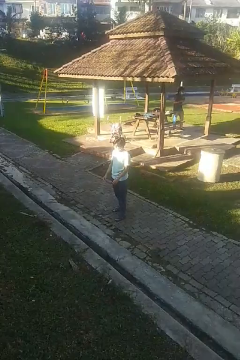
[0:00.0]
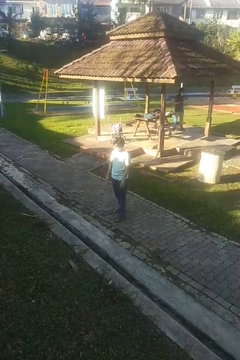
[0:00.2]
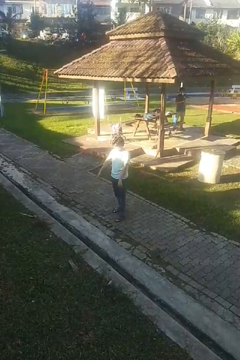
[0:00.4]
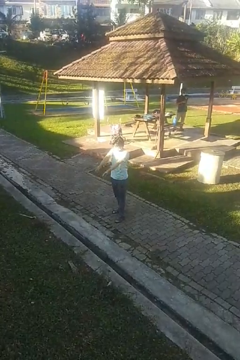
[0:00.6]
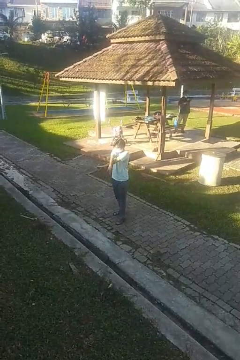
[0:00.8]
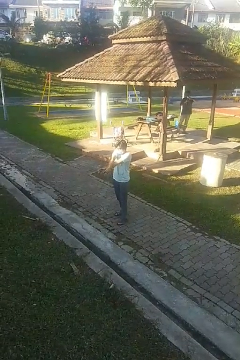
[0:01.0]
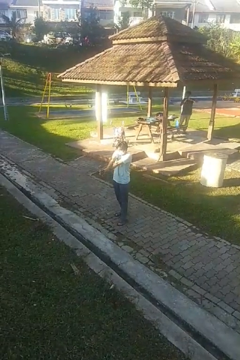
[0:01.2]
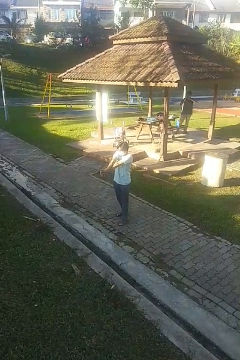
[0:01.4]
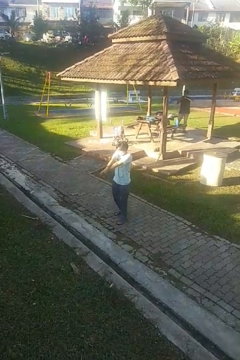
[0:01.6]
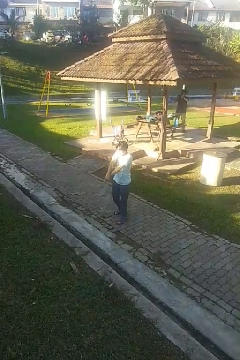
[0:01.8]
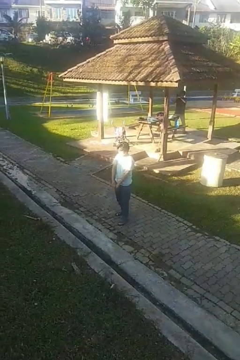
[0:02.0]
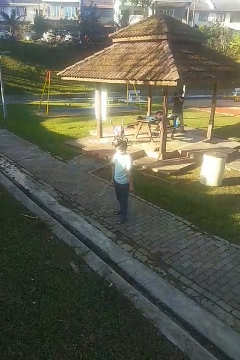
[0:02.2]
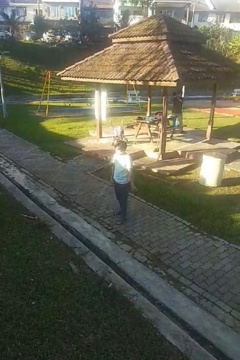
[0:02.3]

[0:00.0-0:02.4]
person crosses arms

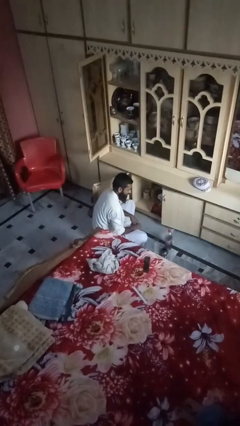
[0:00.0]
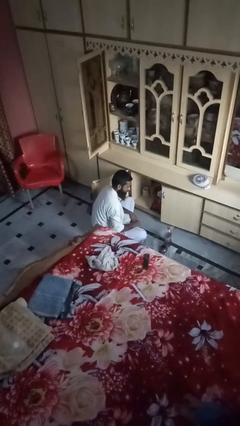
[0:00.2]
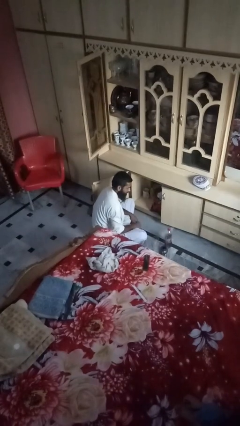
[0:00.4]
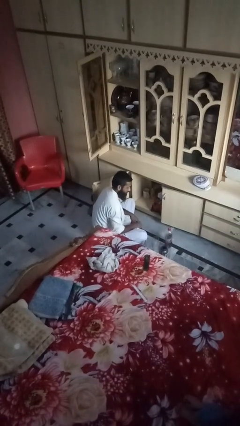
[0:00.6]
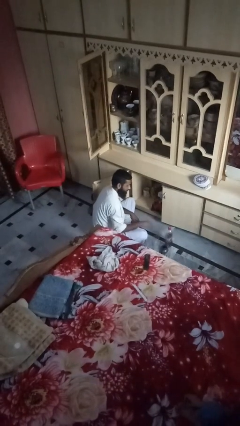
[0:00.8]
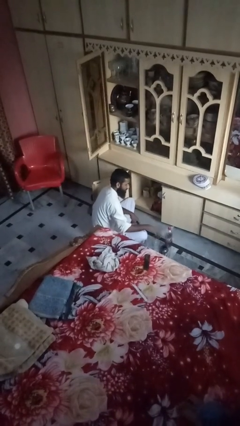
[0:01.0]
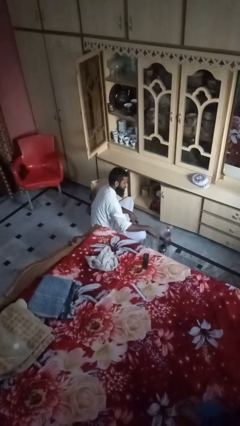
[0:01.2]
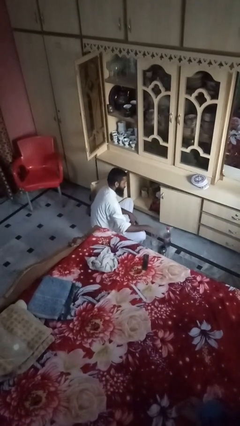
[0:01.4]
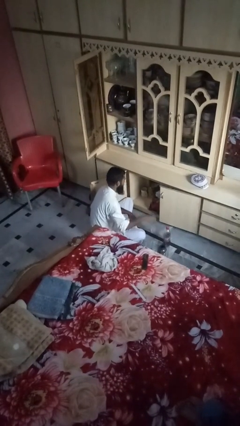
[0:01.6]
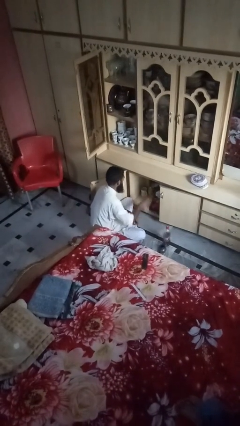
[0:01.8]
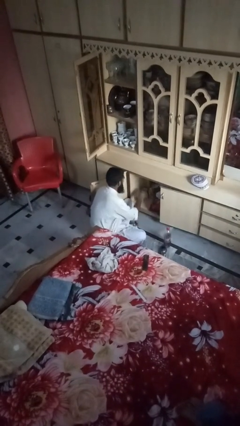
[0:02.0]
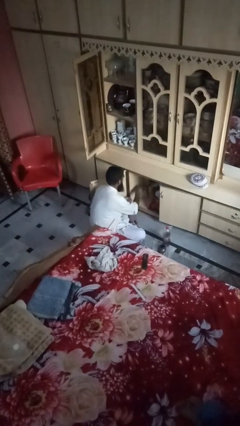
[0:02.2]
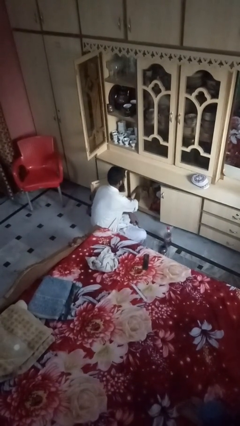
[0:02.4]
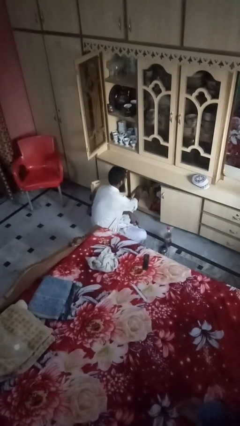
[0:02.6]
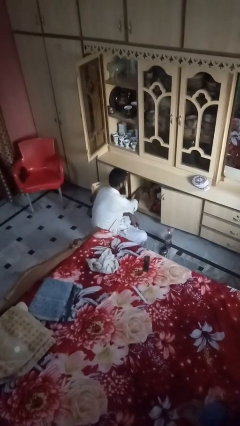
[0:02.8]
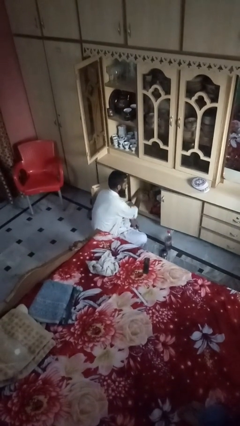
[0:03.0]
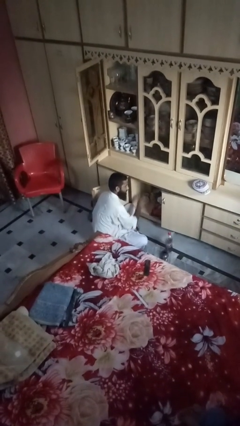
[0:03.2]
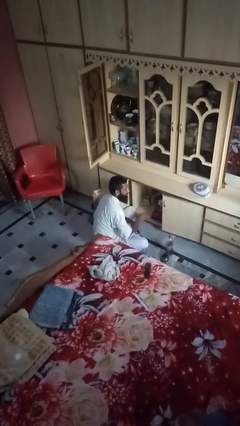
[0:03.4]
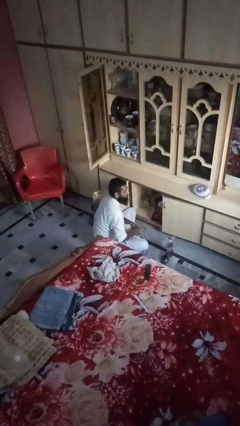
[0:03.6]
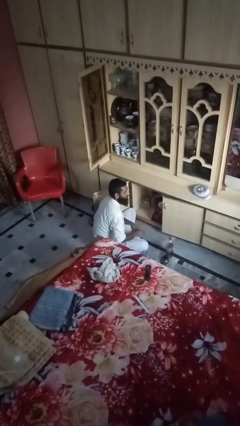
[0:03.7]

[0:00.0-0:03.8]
person loads groceries into cabinet

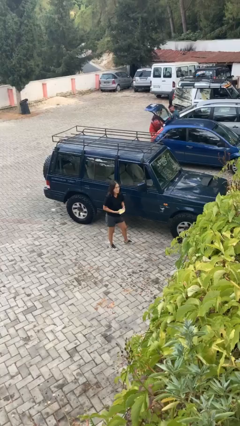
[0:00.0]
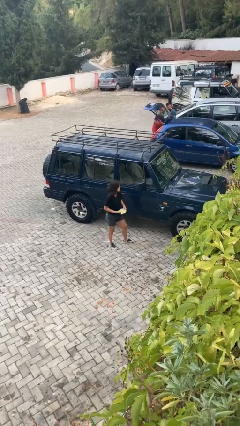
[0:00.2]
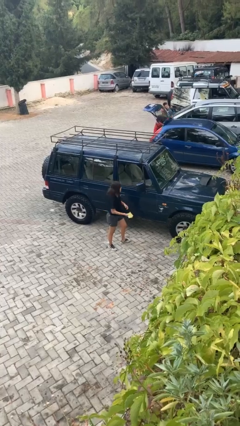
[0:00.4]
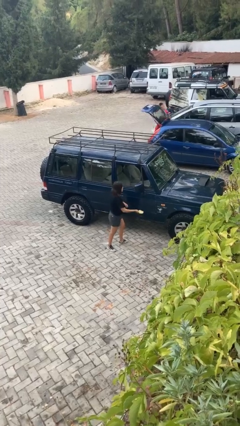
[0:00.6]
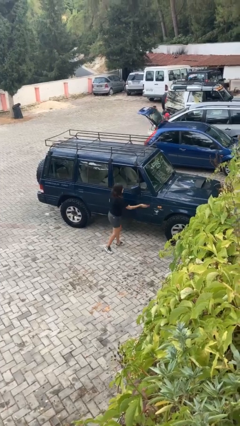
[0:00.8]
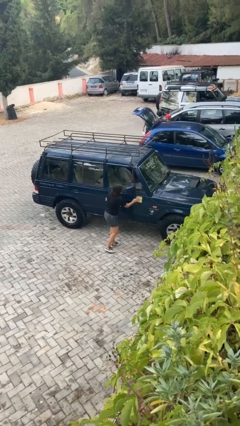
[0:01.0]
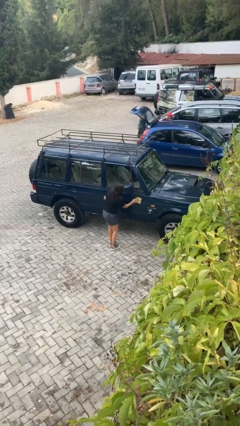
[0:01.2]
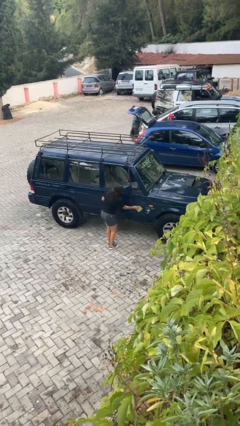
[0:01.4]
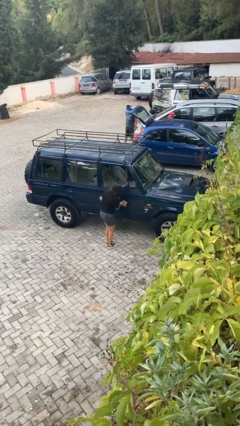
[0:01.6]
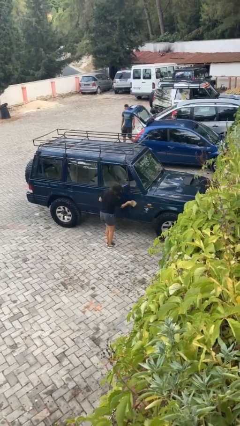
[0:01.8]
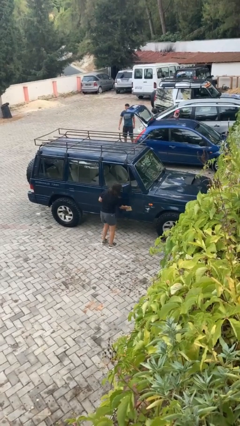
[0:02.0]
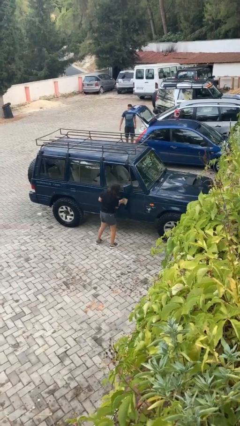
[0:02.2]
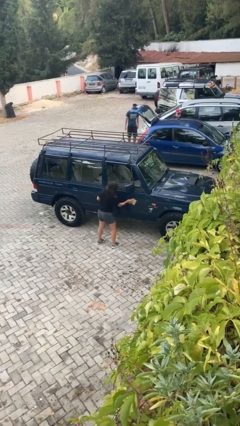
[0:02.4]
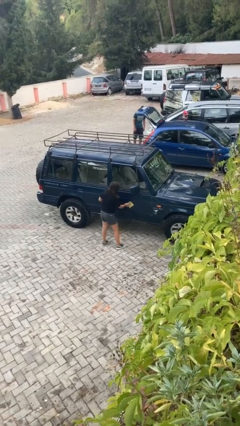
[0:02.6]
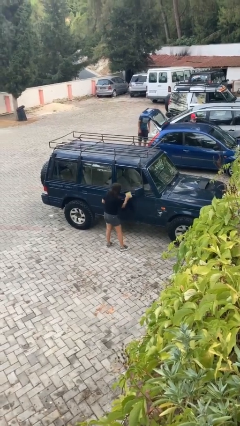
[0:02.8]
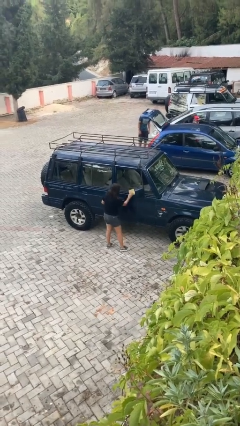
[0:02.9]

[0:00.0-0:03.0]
person polishes car with rag

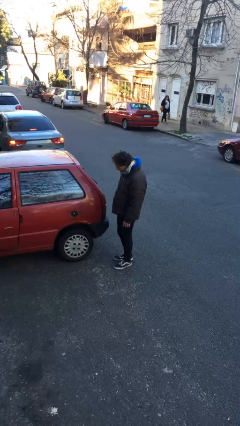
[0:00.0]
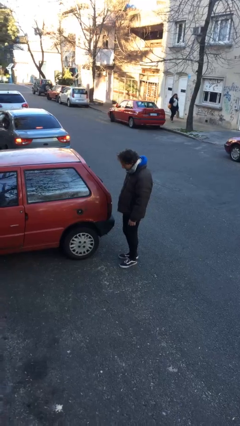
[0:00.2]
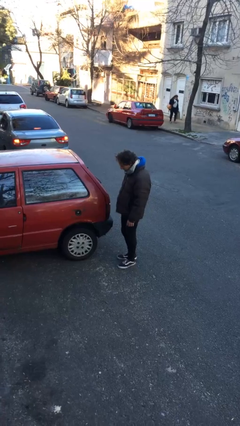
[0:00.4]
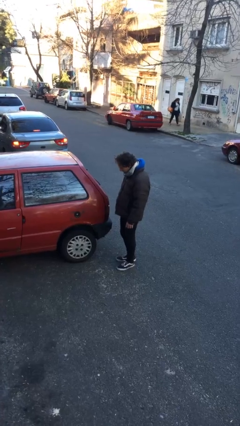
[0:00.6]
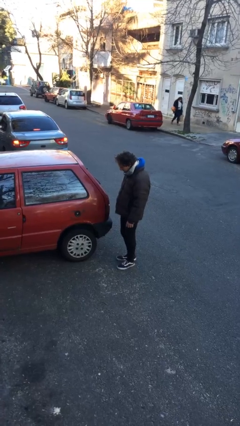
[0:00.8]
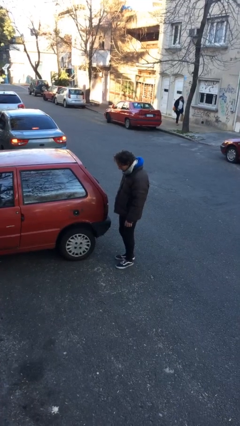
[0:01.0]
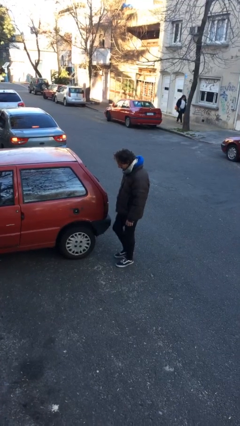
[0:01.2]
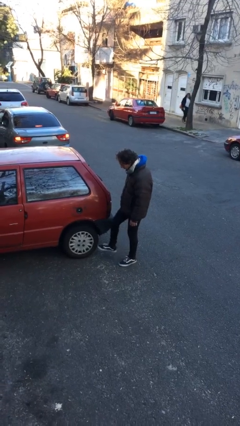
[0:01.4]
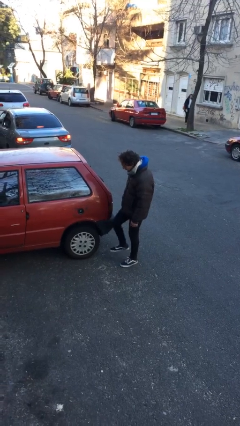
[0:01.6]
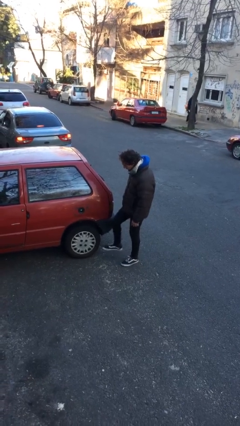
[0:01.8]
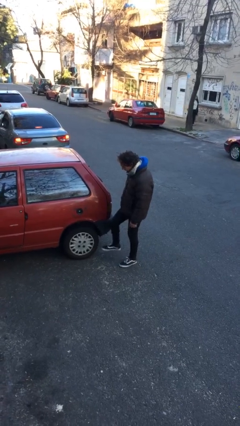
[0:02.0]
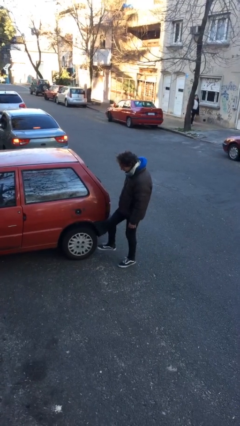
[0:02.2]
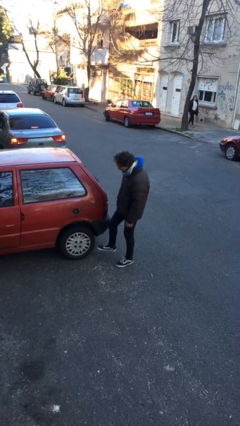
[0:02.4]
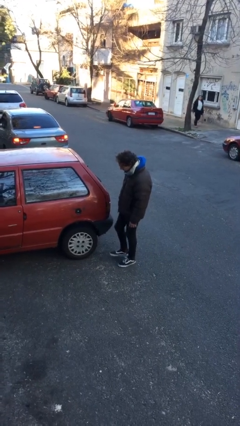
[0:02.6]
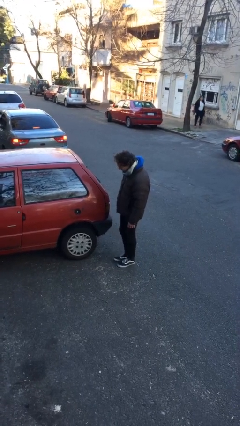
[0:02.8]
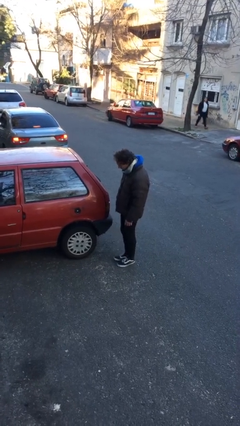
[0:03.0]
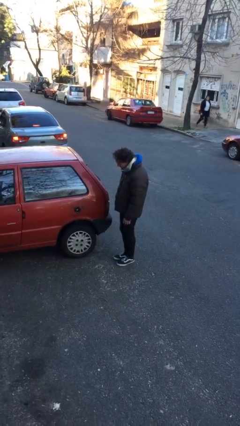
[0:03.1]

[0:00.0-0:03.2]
person kicks car tires

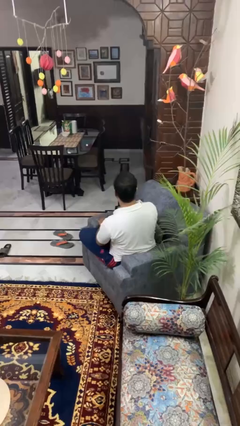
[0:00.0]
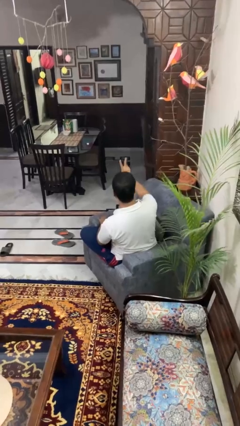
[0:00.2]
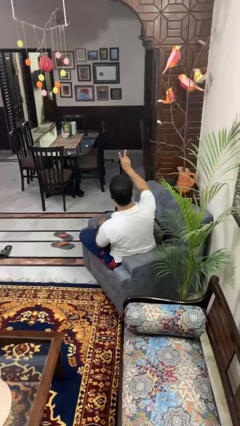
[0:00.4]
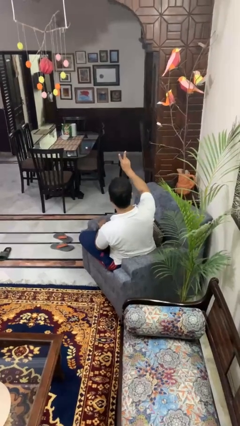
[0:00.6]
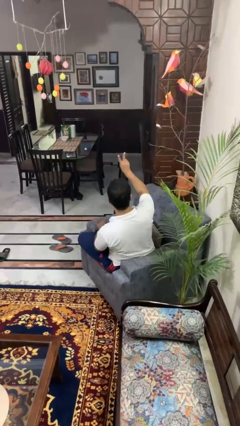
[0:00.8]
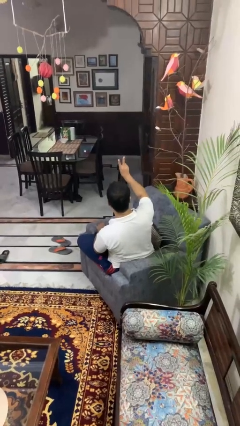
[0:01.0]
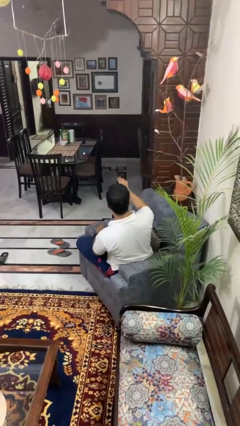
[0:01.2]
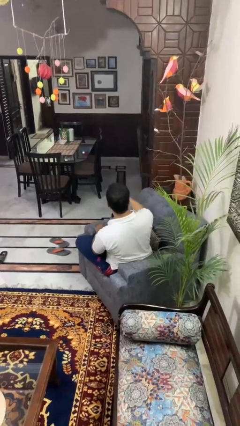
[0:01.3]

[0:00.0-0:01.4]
person gestures peace

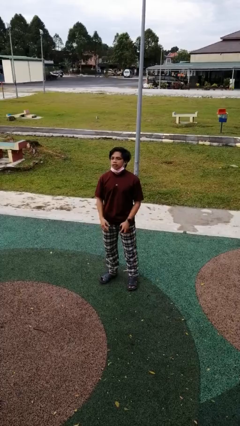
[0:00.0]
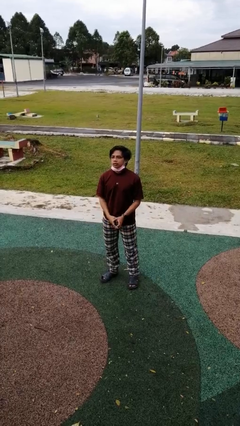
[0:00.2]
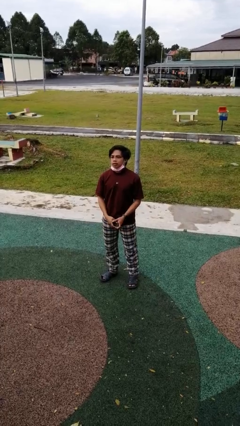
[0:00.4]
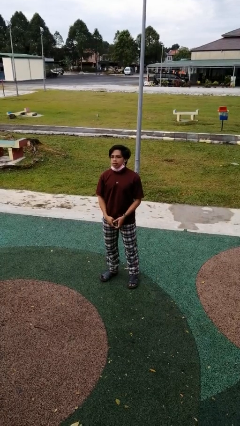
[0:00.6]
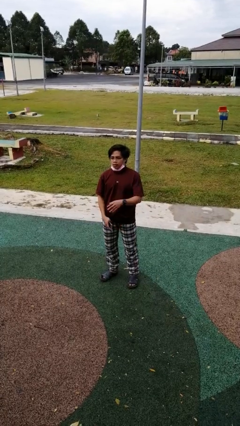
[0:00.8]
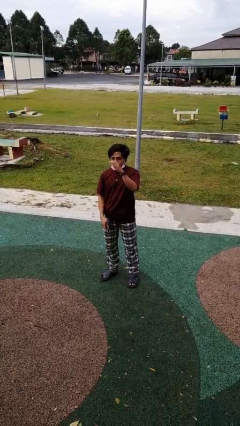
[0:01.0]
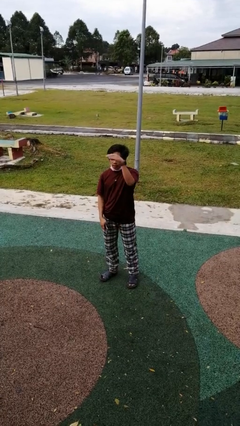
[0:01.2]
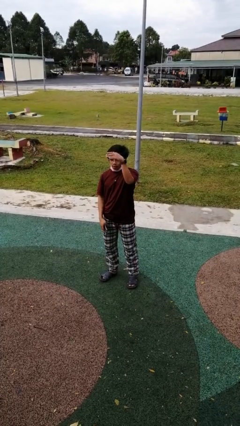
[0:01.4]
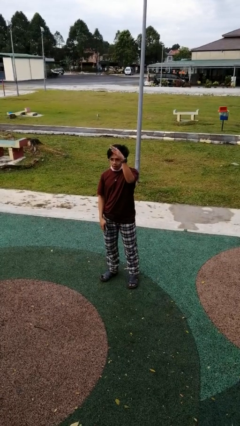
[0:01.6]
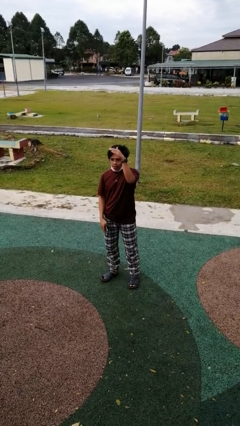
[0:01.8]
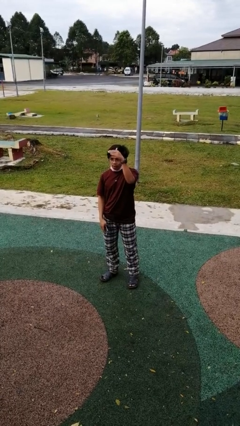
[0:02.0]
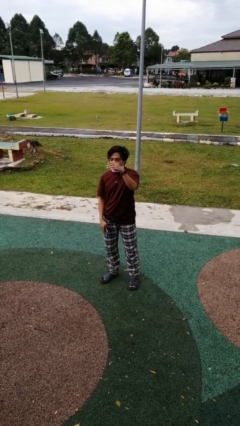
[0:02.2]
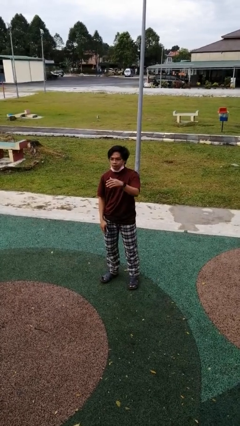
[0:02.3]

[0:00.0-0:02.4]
person gestures come here

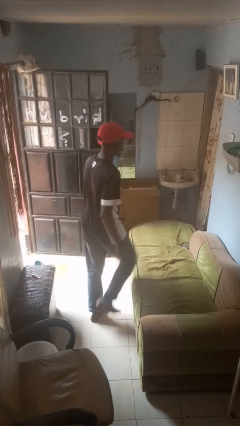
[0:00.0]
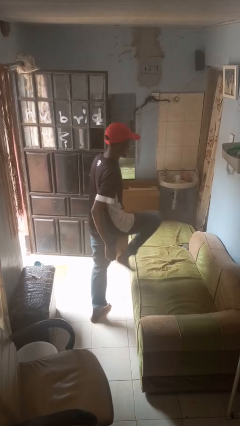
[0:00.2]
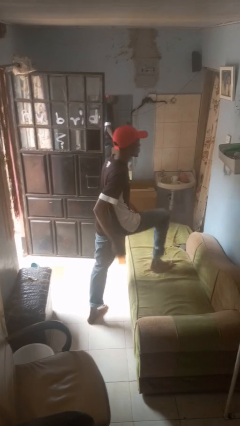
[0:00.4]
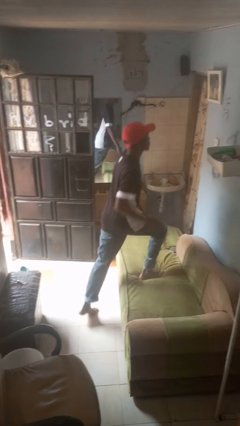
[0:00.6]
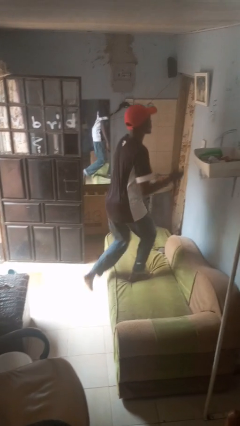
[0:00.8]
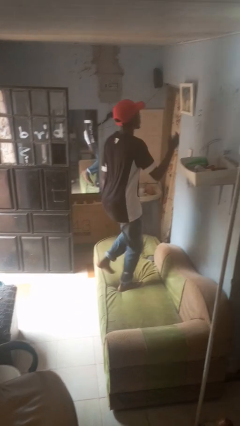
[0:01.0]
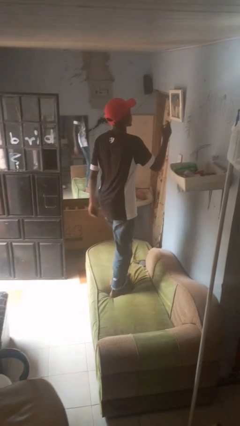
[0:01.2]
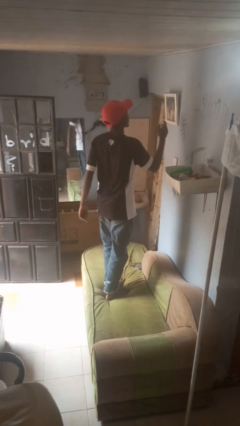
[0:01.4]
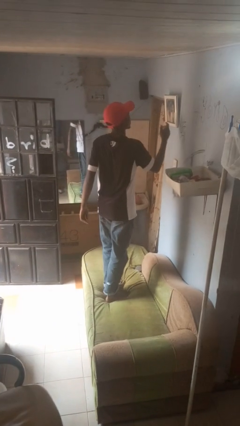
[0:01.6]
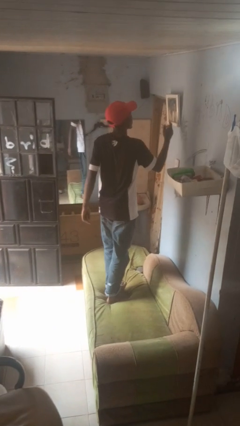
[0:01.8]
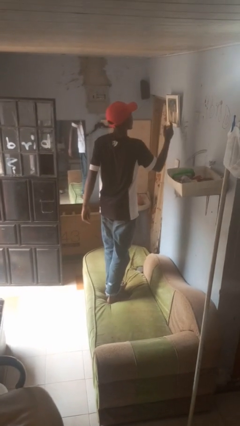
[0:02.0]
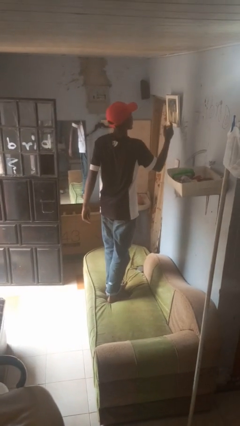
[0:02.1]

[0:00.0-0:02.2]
person climbs on couch
